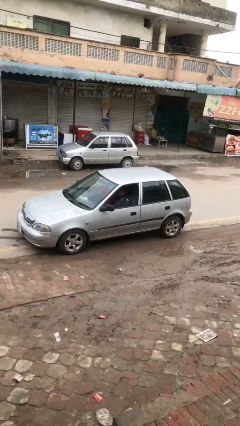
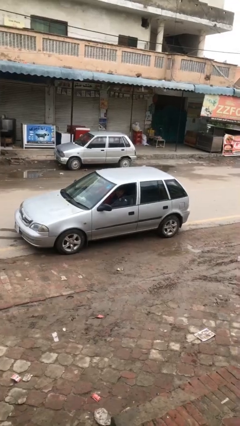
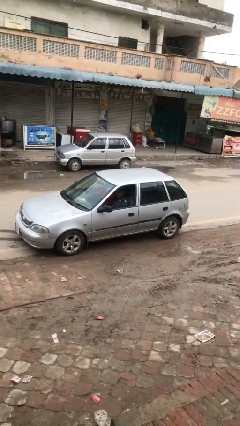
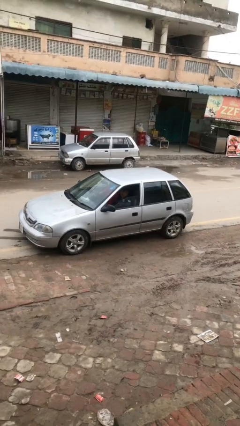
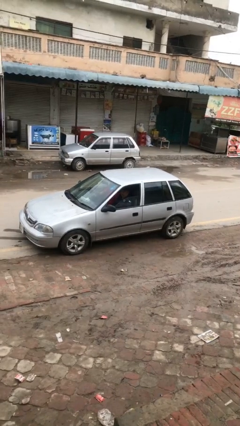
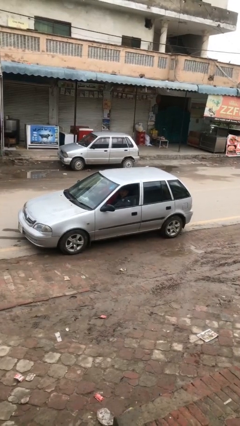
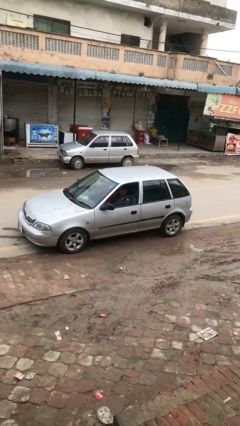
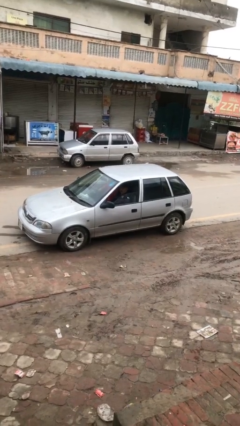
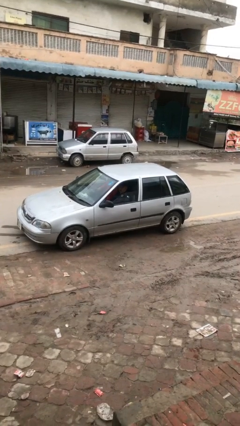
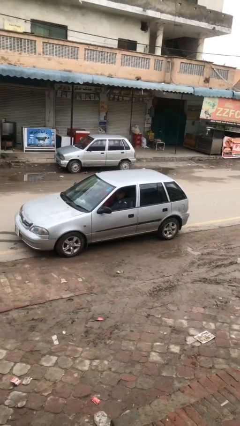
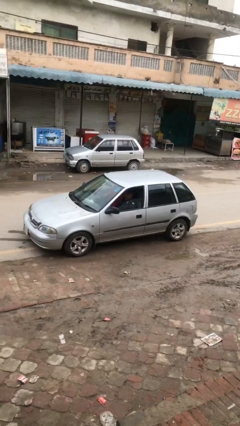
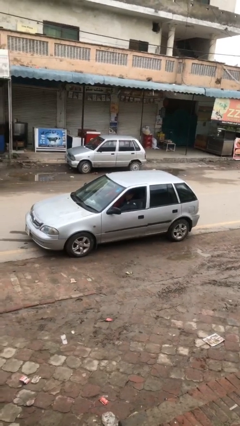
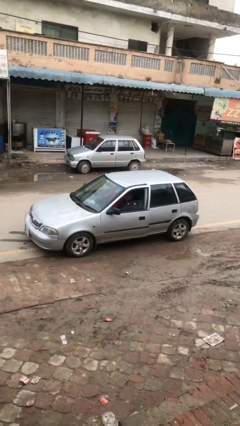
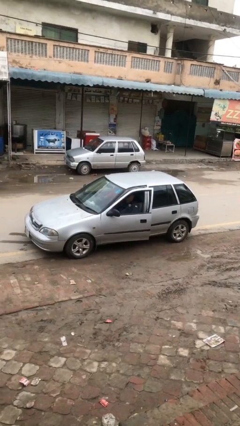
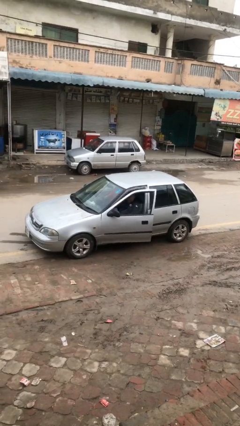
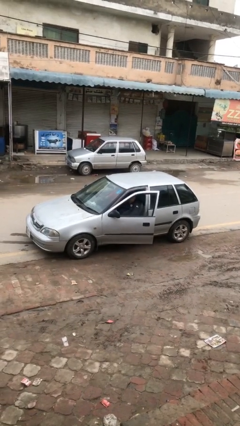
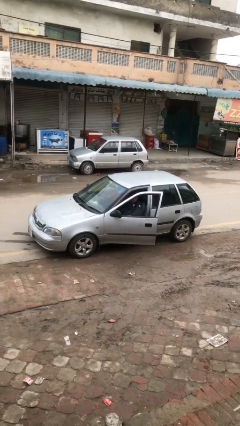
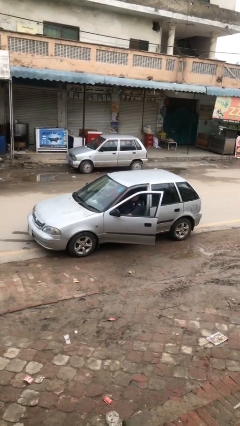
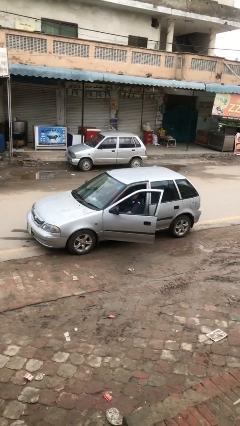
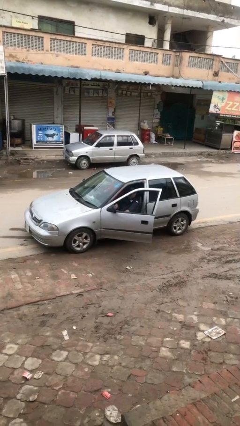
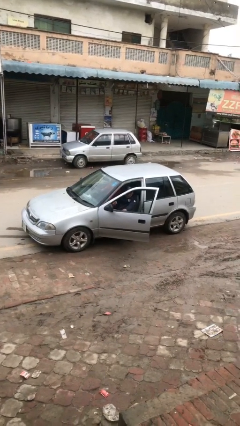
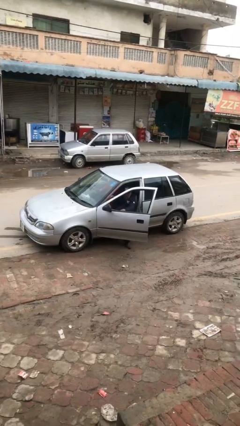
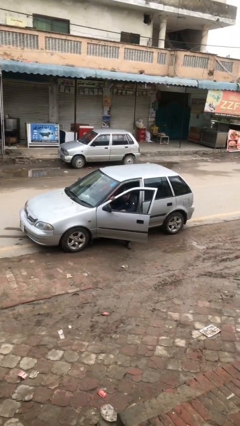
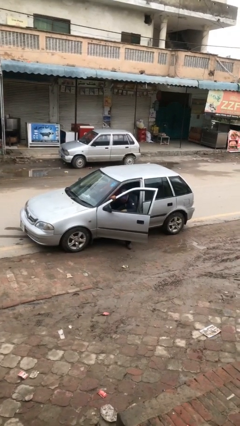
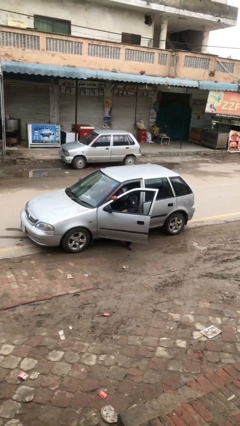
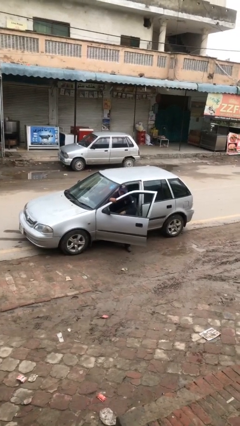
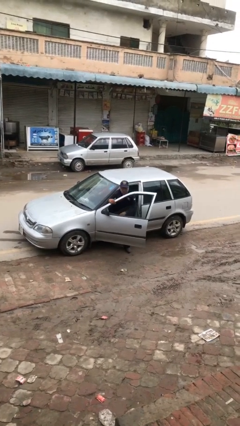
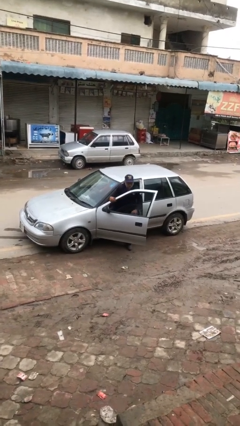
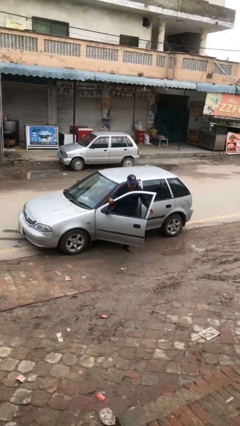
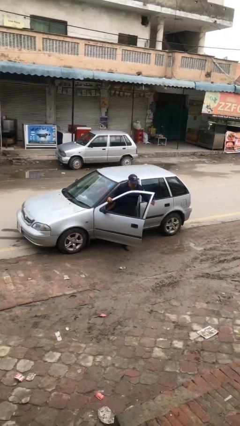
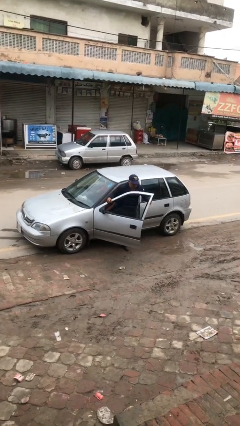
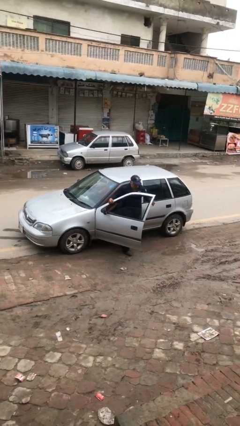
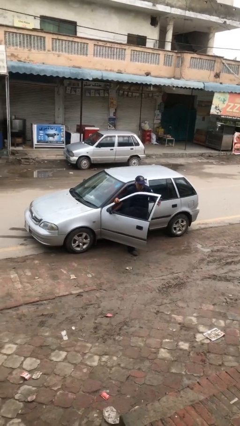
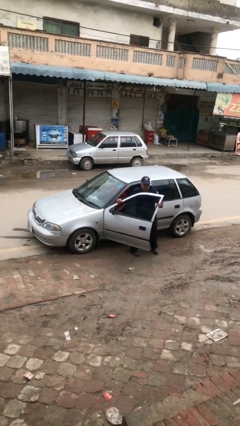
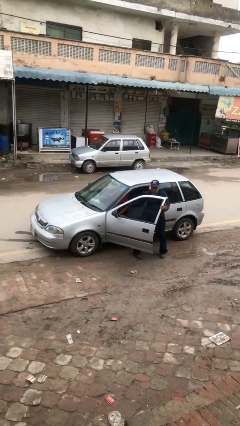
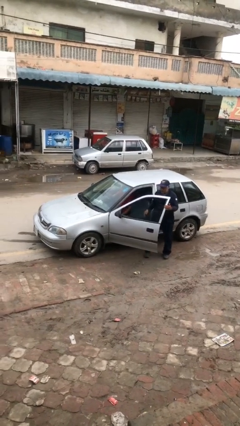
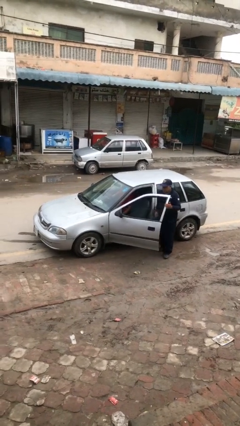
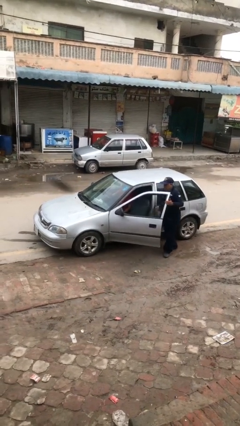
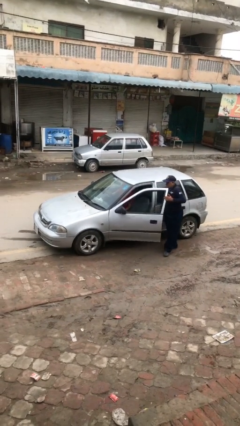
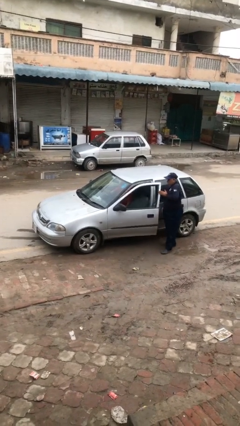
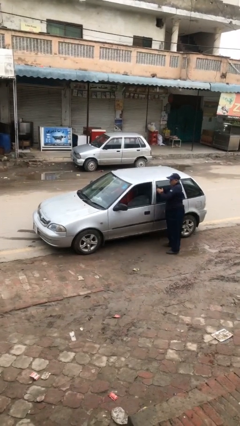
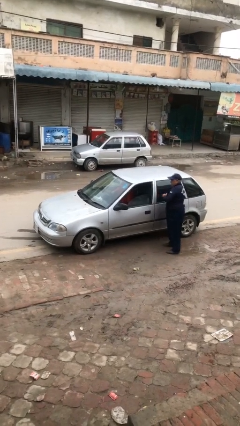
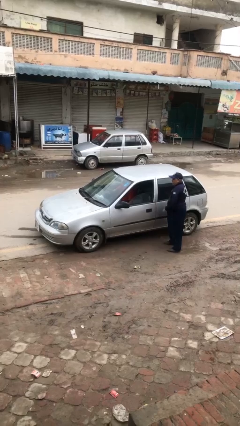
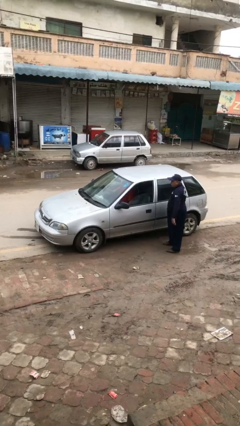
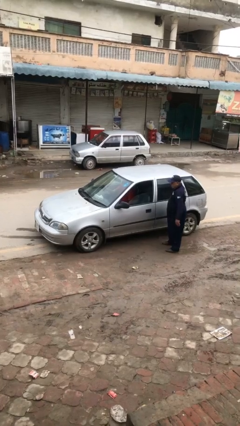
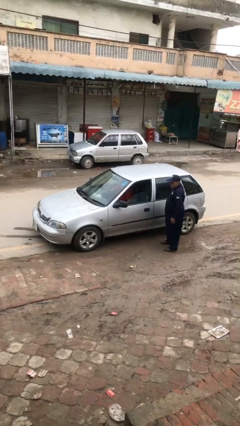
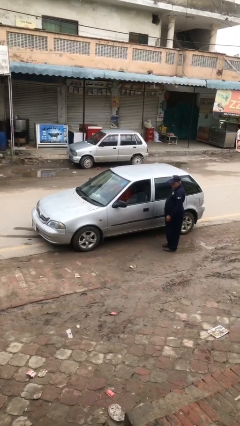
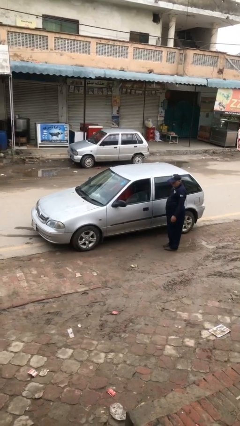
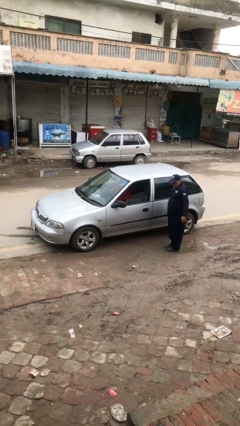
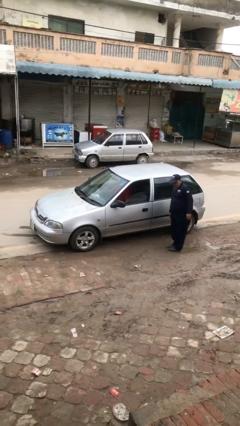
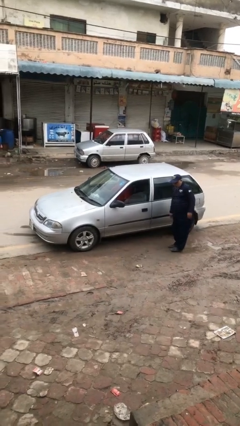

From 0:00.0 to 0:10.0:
car drops off person

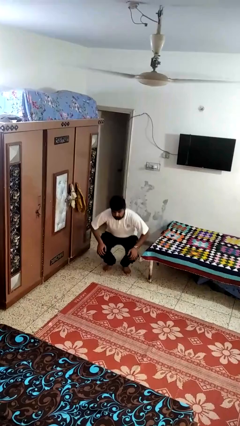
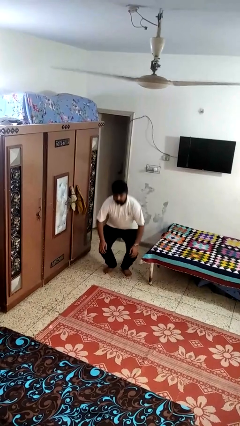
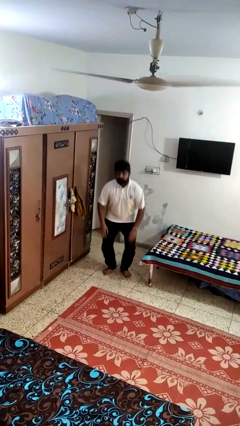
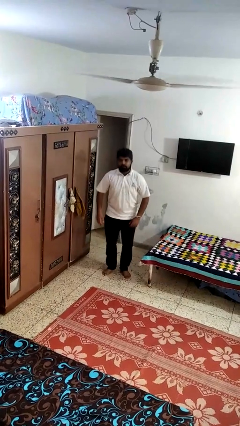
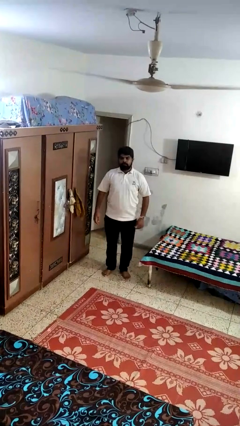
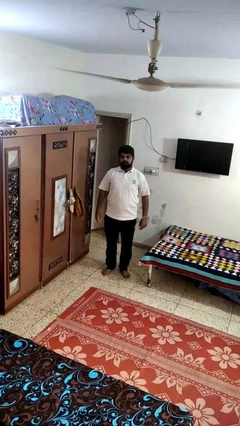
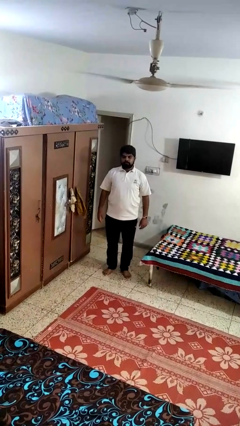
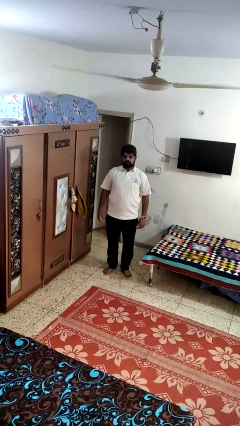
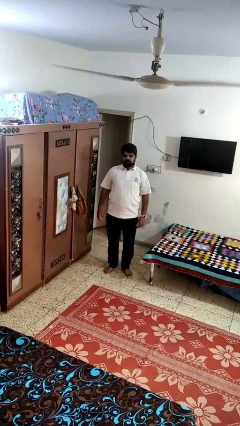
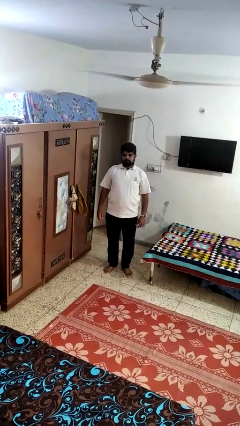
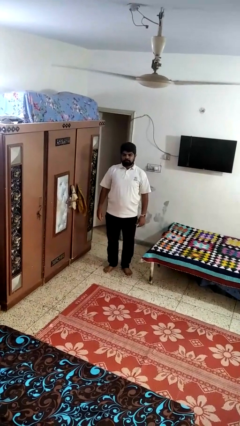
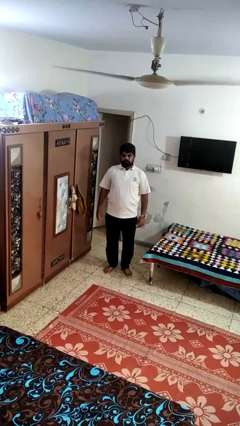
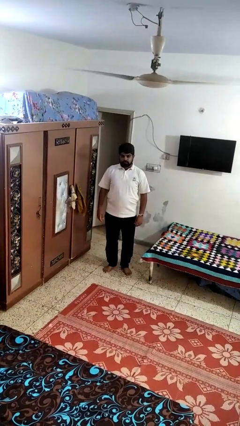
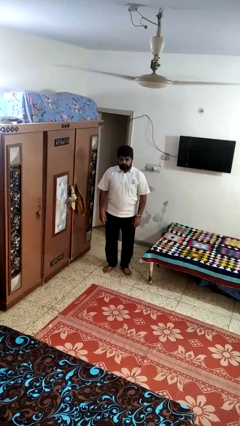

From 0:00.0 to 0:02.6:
person stands up

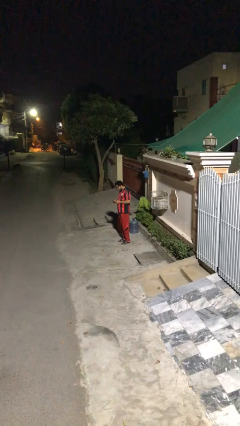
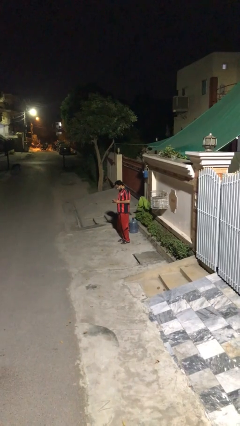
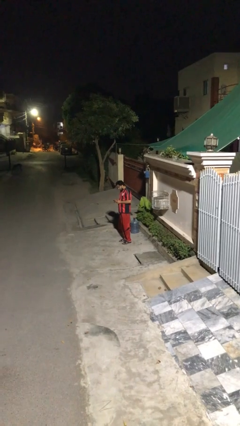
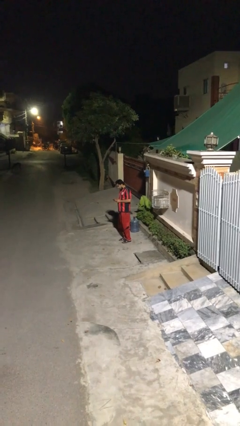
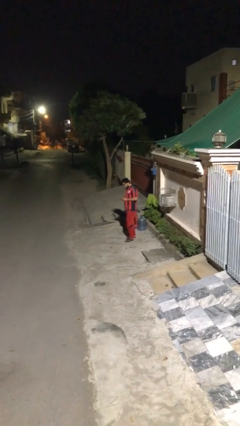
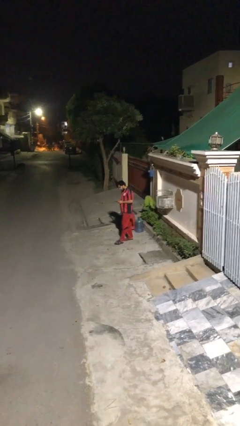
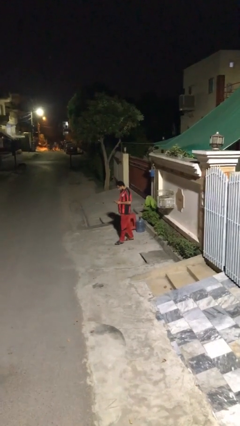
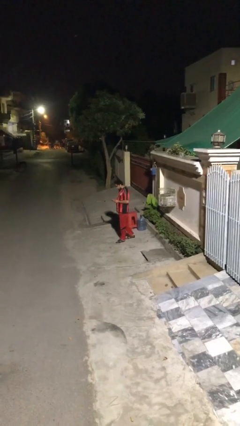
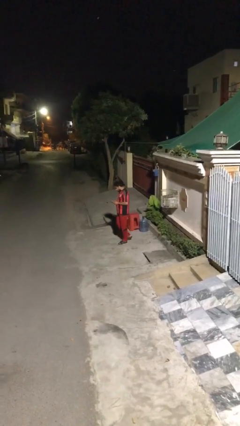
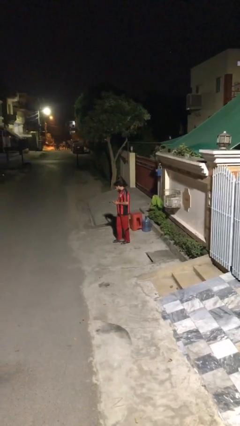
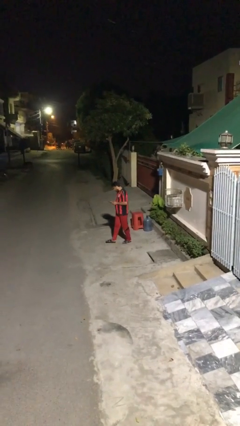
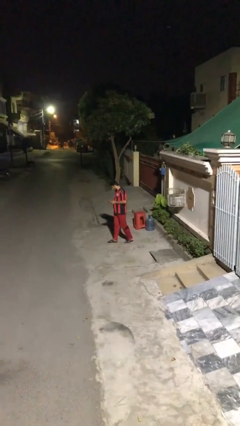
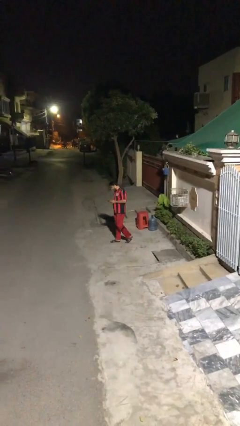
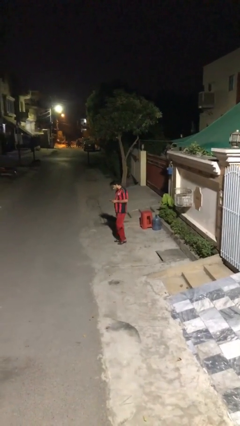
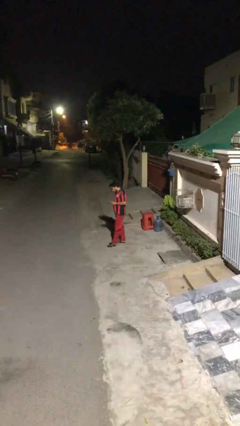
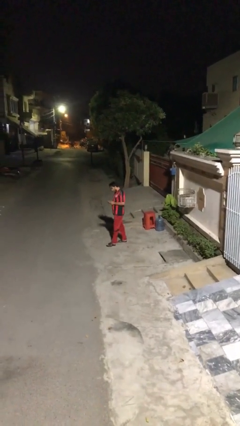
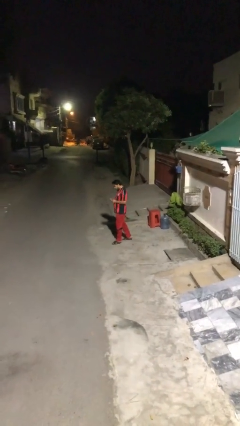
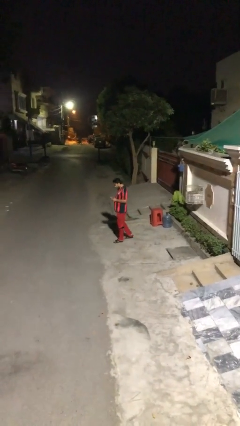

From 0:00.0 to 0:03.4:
person texts on phone

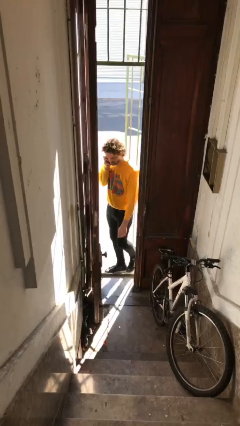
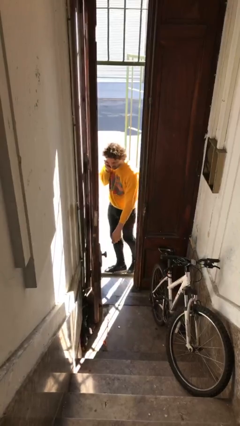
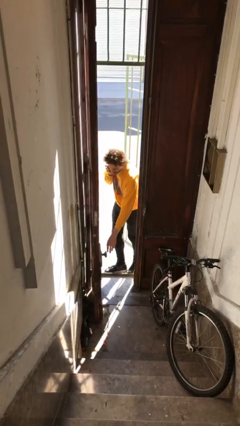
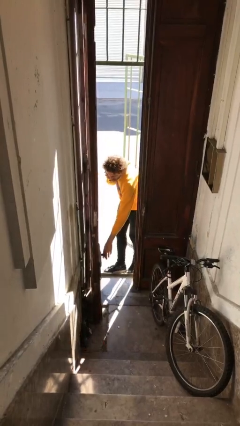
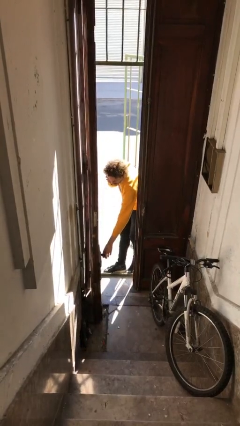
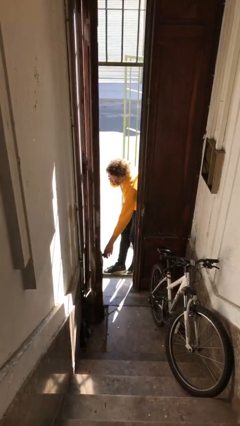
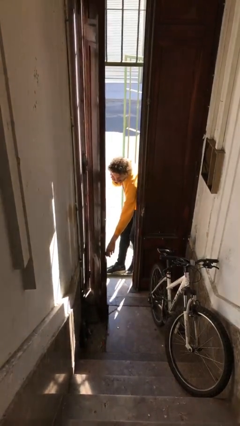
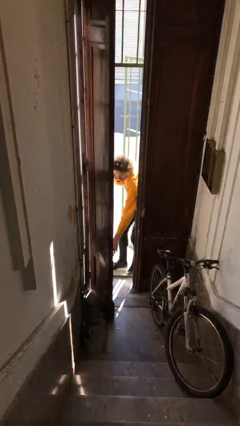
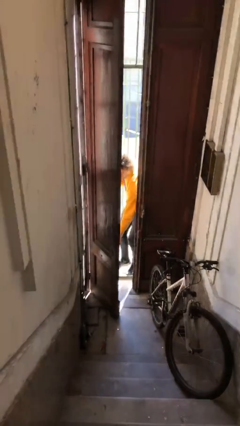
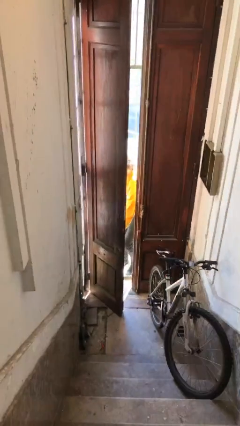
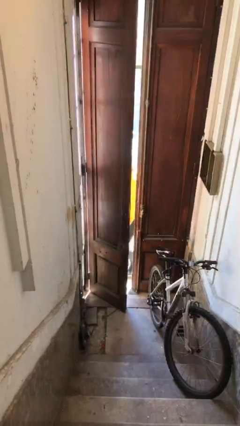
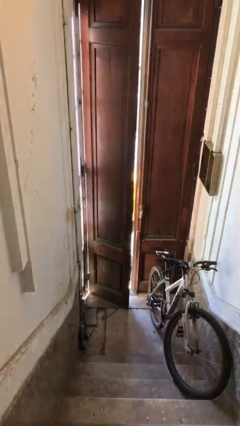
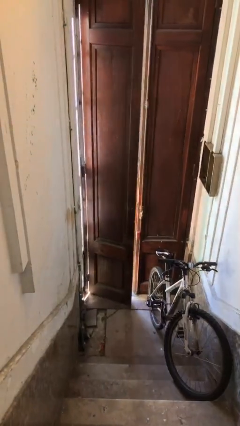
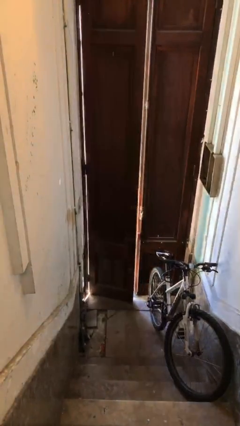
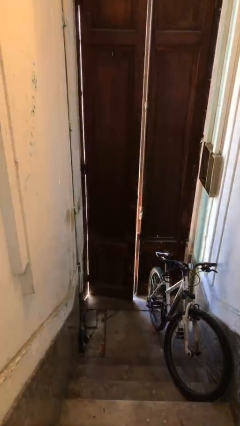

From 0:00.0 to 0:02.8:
person closes facility door
